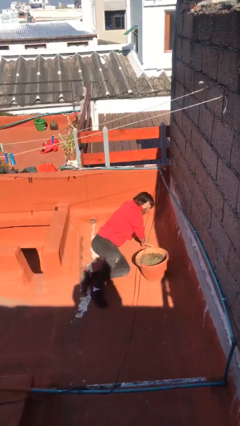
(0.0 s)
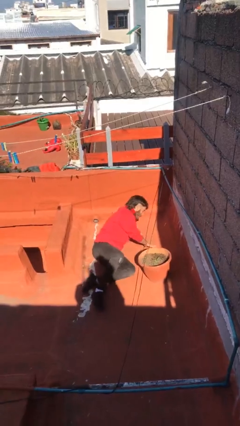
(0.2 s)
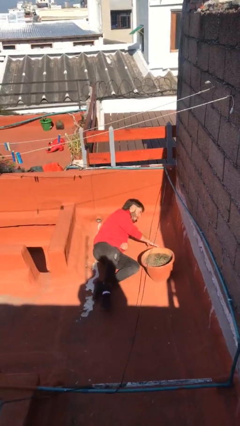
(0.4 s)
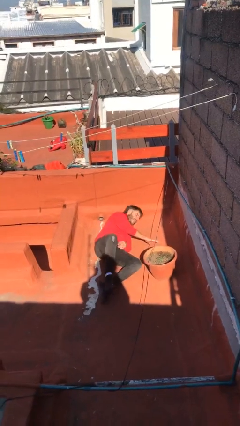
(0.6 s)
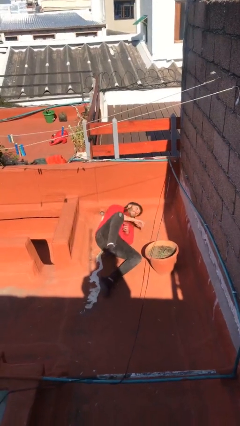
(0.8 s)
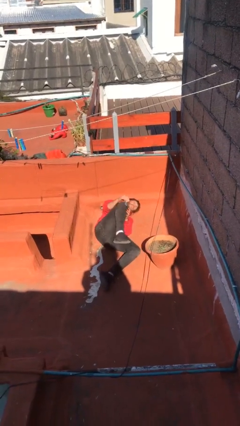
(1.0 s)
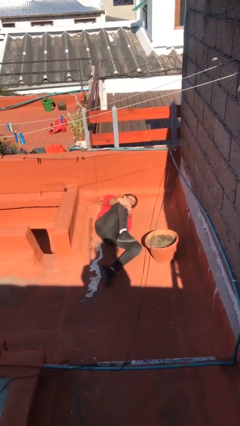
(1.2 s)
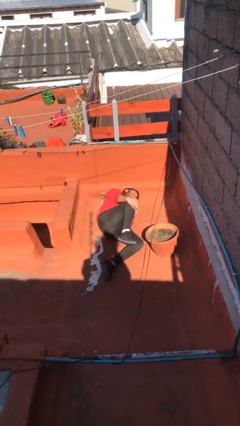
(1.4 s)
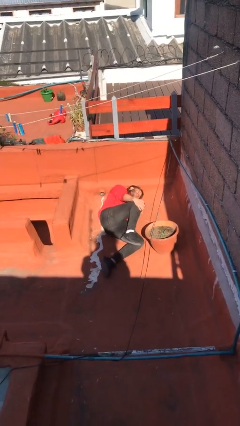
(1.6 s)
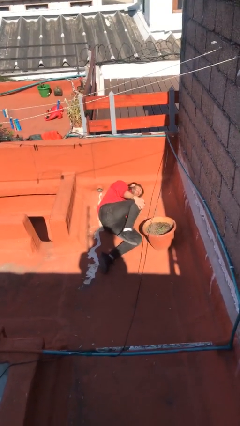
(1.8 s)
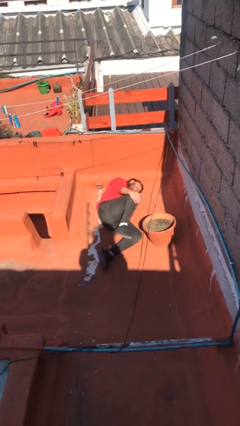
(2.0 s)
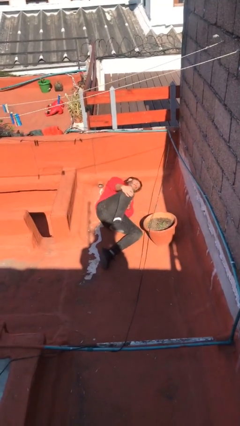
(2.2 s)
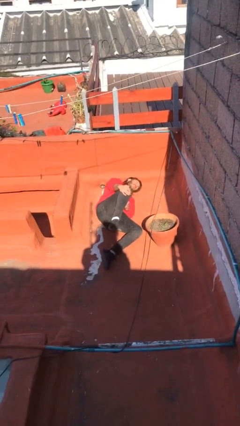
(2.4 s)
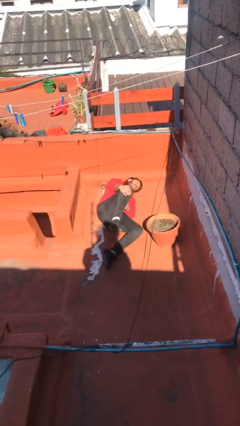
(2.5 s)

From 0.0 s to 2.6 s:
person lies down on floor

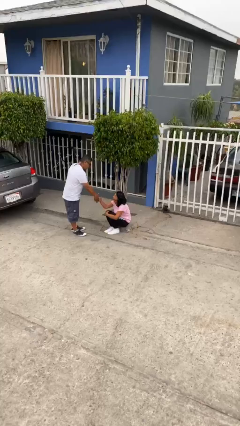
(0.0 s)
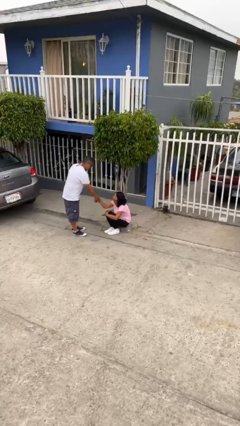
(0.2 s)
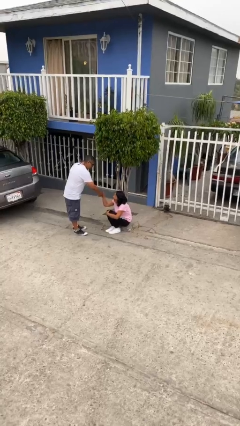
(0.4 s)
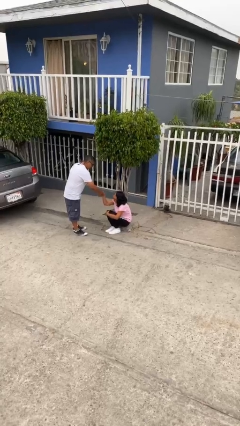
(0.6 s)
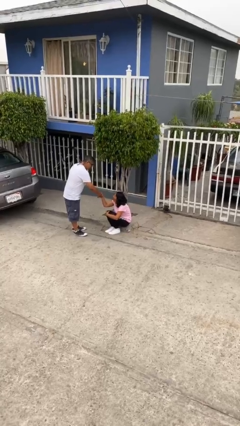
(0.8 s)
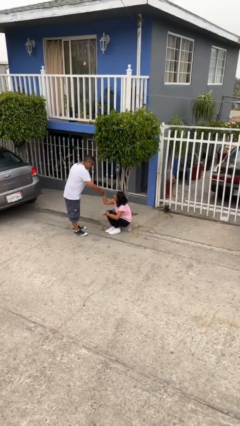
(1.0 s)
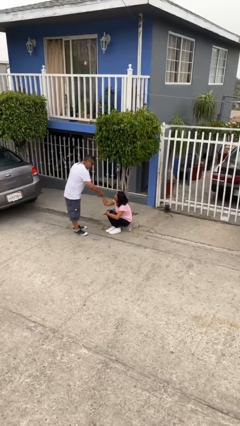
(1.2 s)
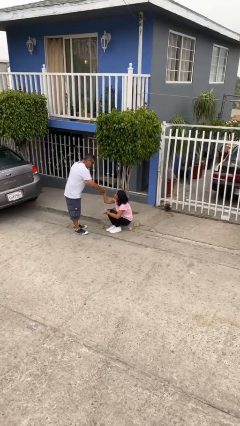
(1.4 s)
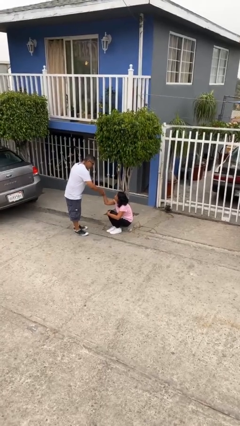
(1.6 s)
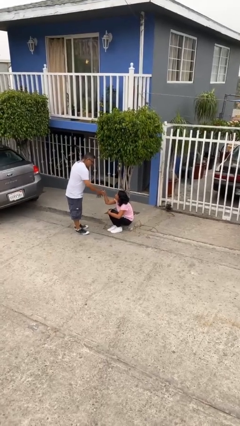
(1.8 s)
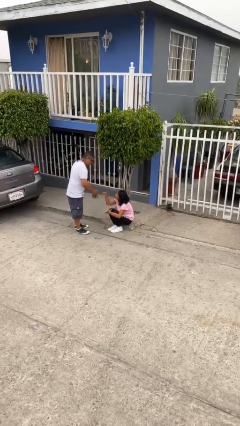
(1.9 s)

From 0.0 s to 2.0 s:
person shakes hand

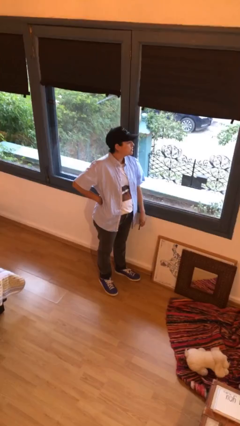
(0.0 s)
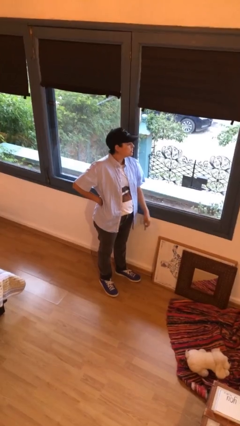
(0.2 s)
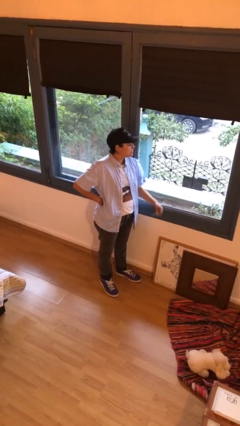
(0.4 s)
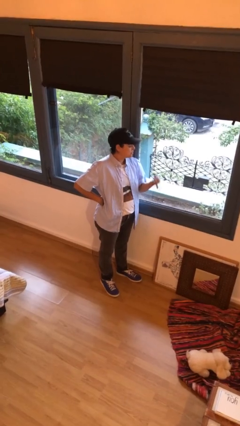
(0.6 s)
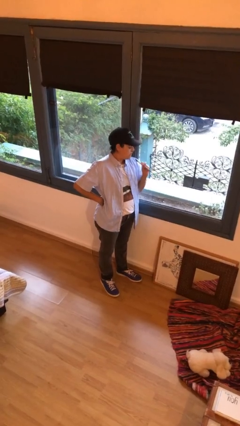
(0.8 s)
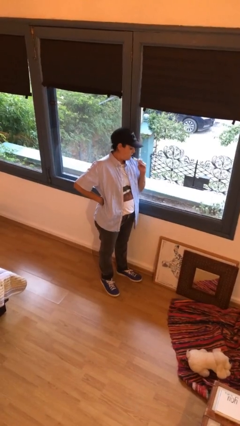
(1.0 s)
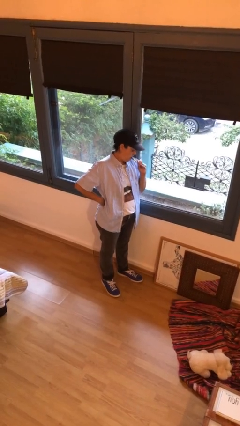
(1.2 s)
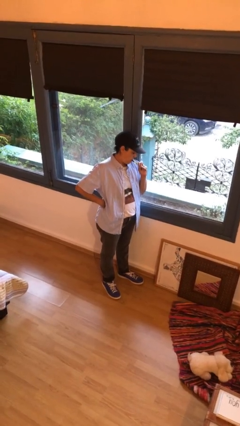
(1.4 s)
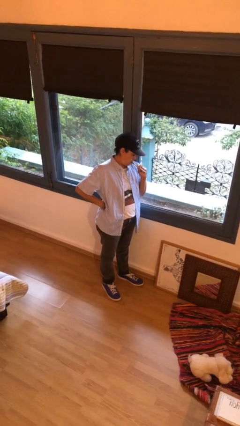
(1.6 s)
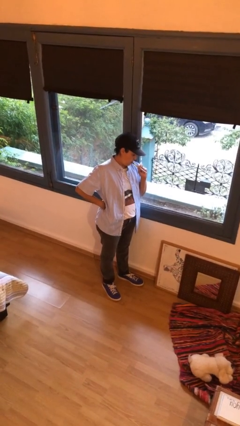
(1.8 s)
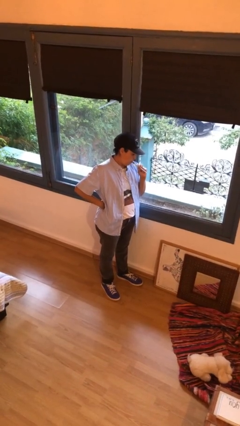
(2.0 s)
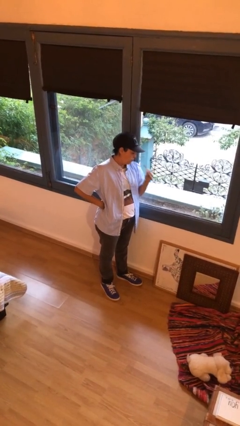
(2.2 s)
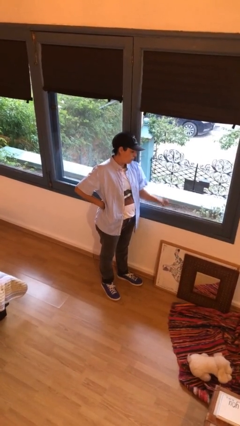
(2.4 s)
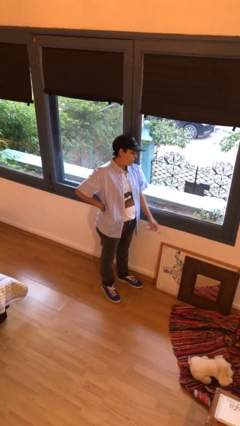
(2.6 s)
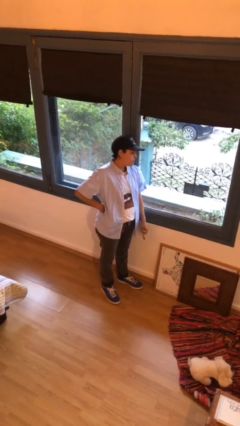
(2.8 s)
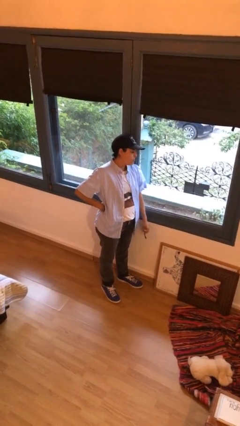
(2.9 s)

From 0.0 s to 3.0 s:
person vapes

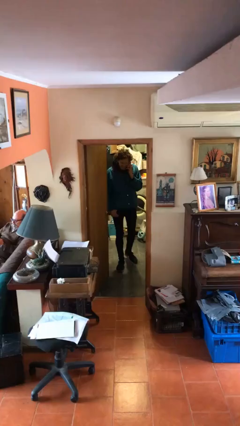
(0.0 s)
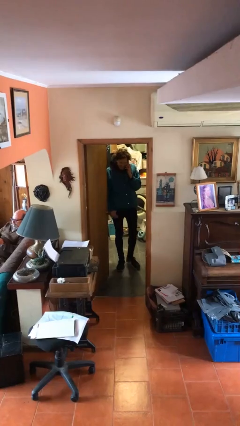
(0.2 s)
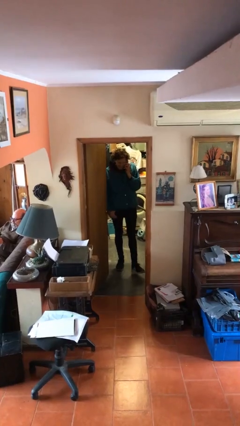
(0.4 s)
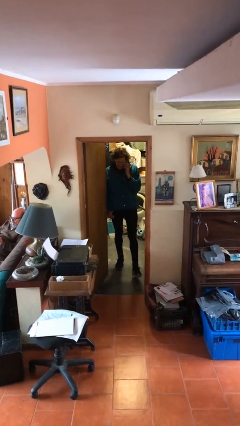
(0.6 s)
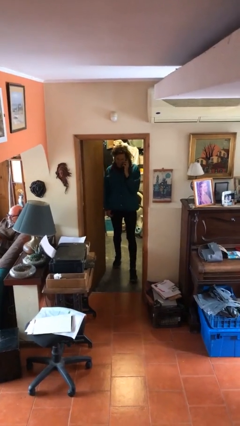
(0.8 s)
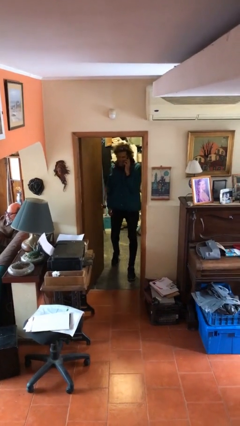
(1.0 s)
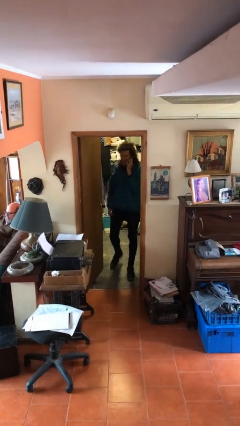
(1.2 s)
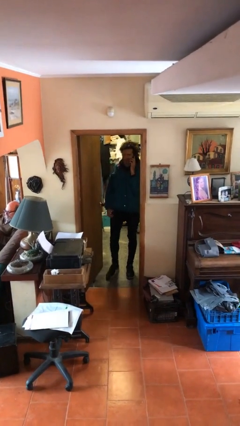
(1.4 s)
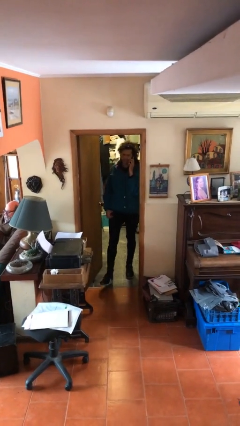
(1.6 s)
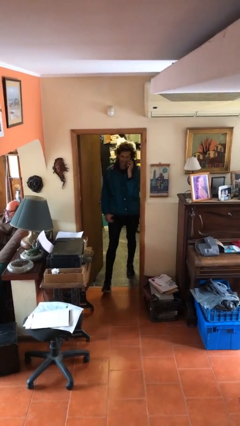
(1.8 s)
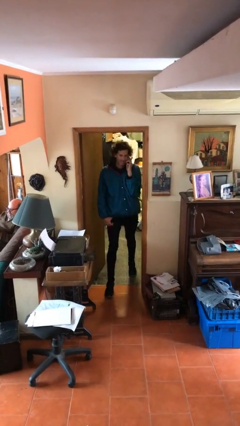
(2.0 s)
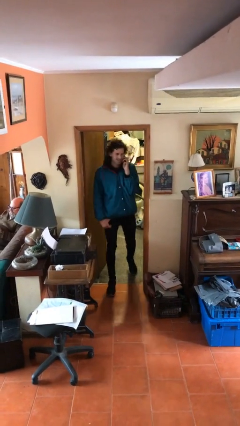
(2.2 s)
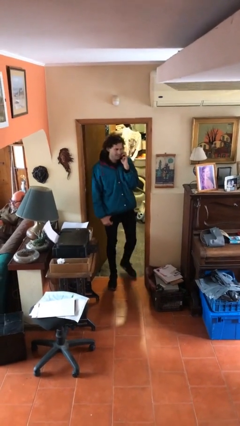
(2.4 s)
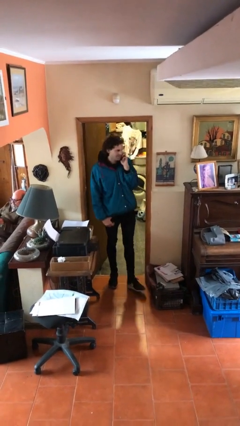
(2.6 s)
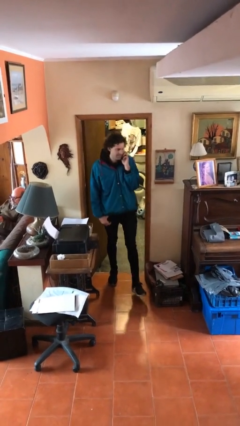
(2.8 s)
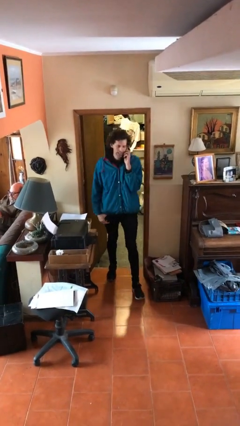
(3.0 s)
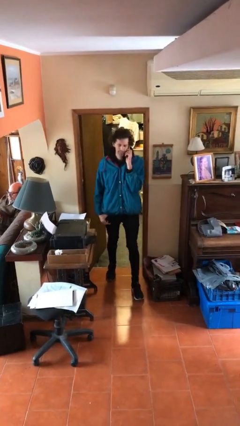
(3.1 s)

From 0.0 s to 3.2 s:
person enters scene through structure

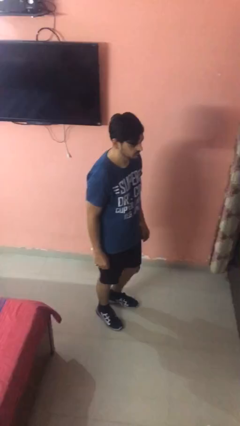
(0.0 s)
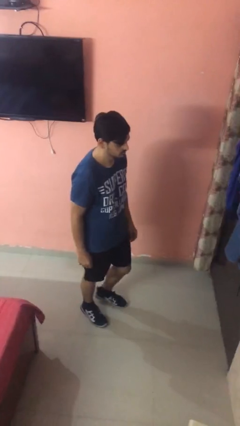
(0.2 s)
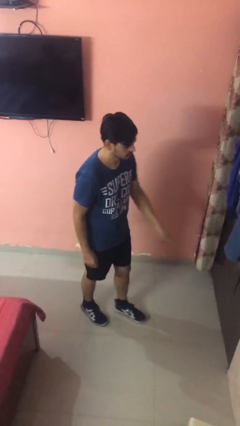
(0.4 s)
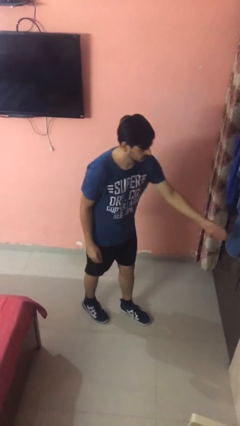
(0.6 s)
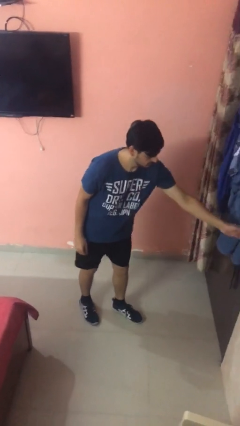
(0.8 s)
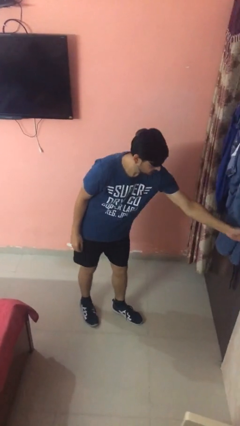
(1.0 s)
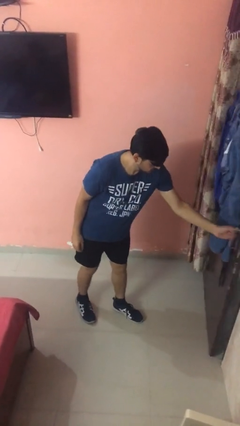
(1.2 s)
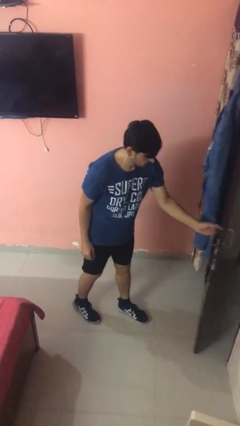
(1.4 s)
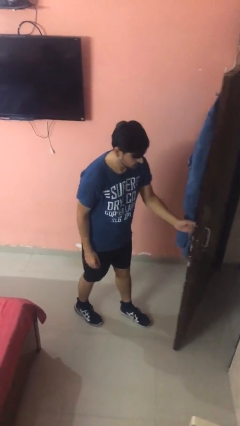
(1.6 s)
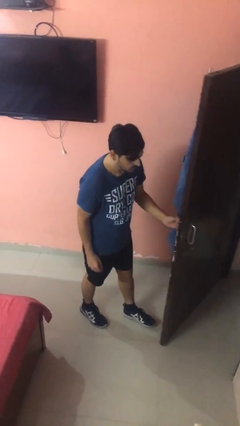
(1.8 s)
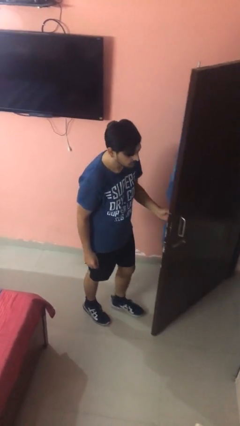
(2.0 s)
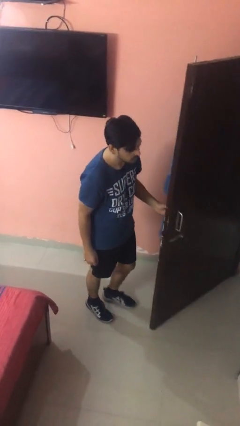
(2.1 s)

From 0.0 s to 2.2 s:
person opens facility door

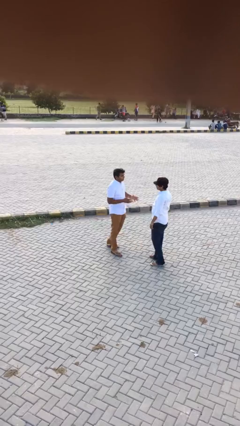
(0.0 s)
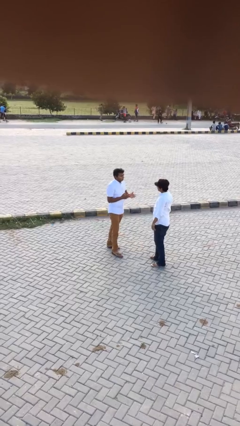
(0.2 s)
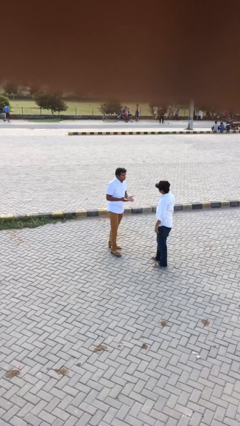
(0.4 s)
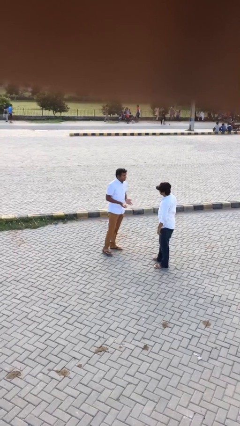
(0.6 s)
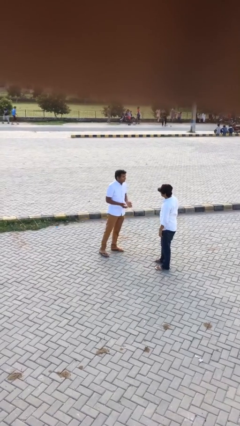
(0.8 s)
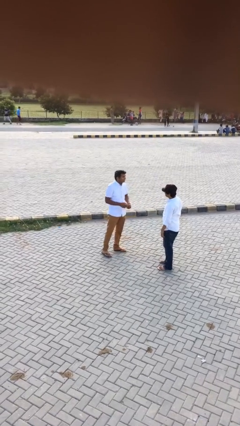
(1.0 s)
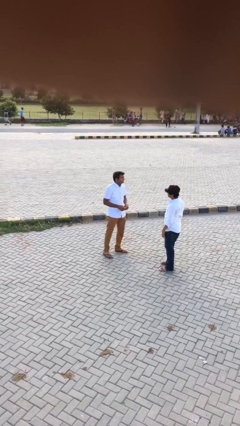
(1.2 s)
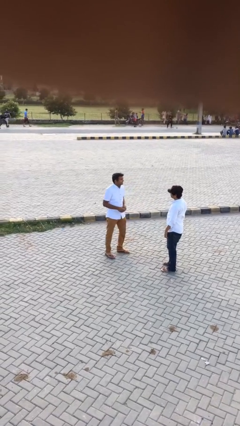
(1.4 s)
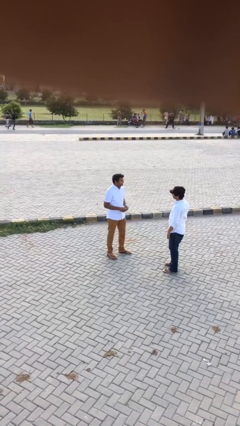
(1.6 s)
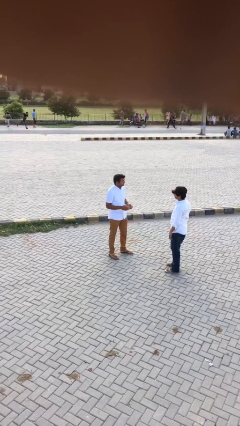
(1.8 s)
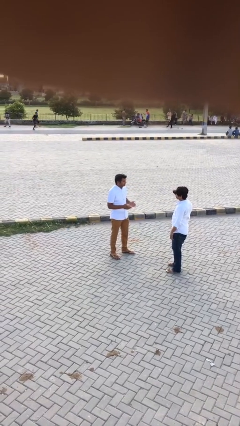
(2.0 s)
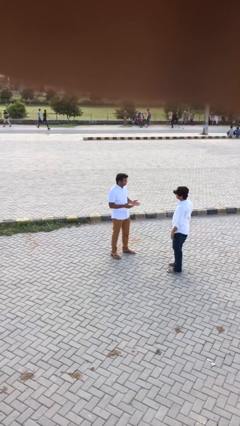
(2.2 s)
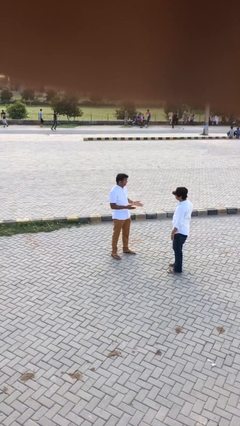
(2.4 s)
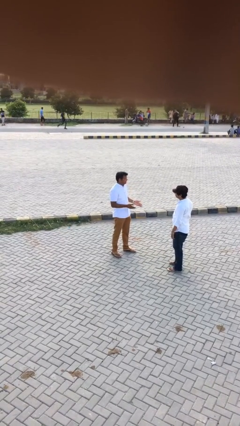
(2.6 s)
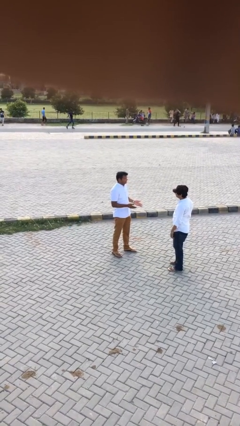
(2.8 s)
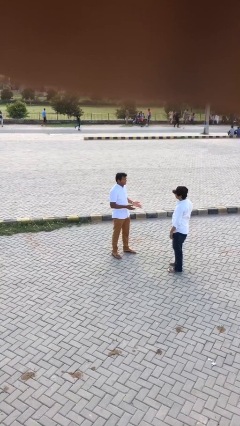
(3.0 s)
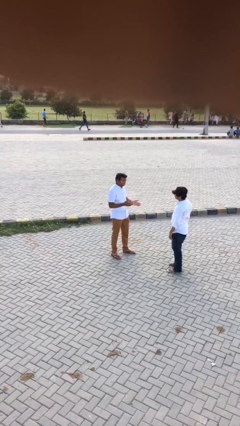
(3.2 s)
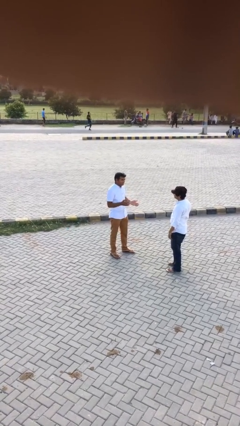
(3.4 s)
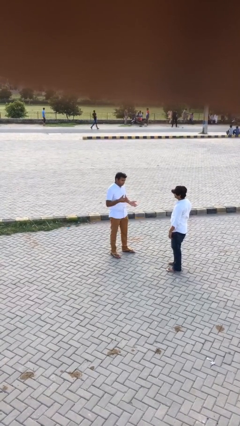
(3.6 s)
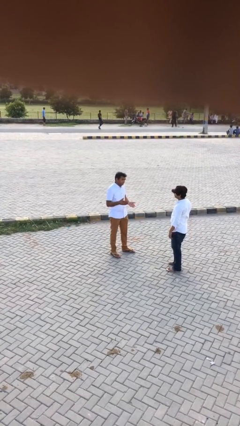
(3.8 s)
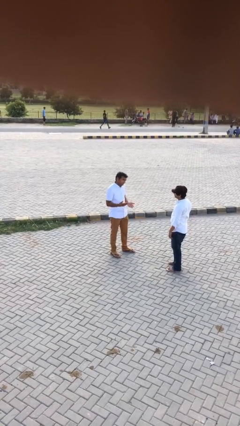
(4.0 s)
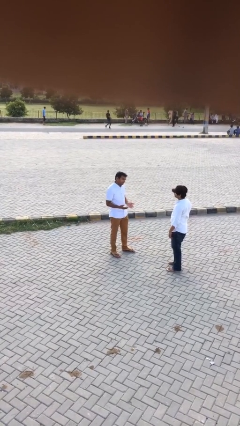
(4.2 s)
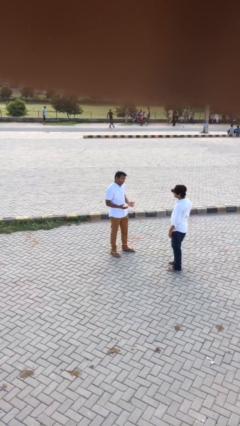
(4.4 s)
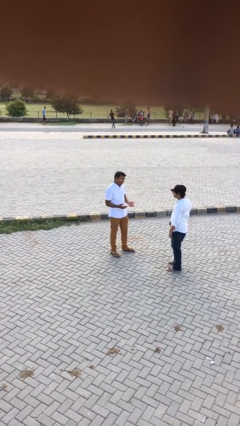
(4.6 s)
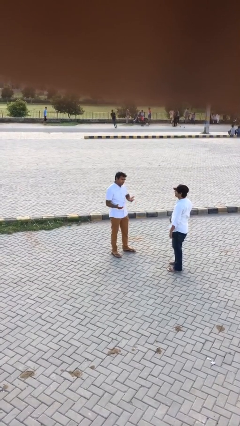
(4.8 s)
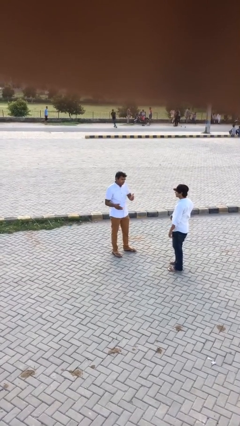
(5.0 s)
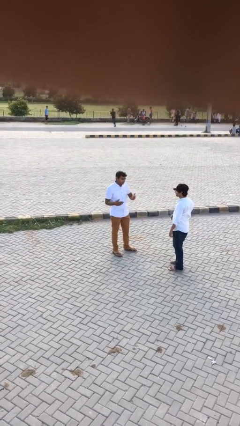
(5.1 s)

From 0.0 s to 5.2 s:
person talks to person
